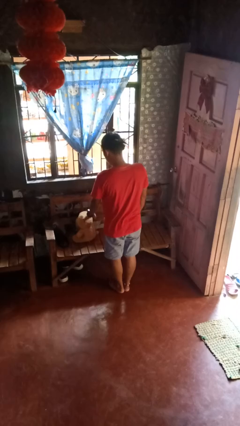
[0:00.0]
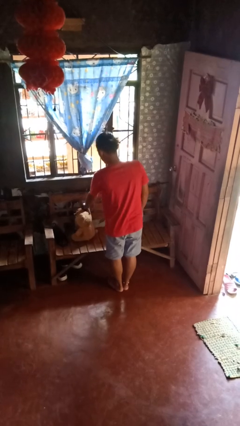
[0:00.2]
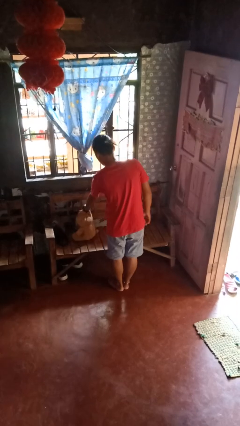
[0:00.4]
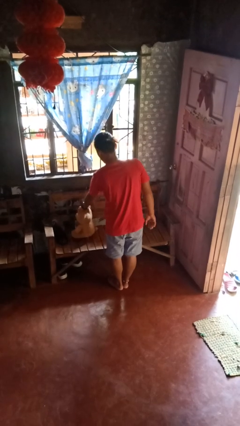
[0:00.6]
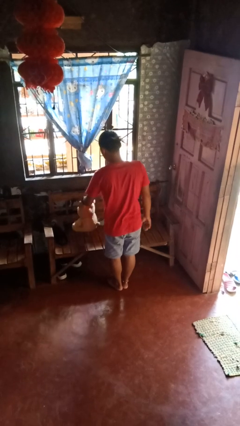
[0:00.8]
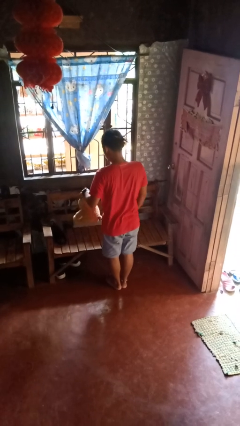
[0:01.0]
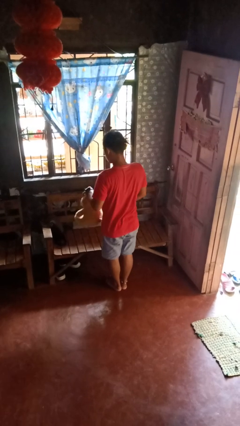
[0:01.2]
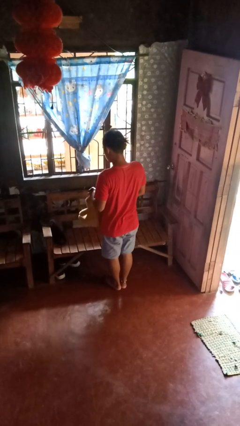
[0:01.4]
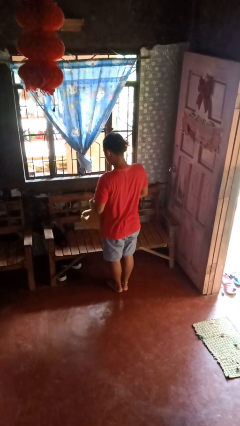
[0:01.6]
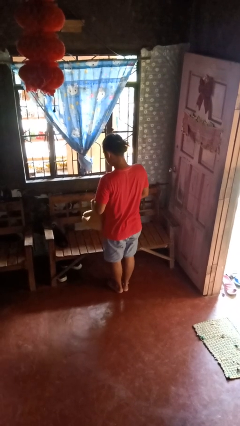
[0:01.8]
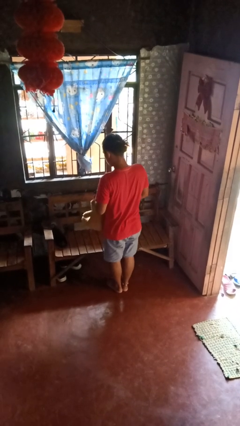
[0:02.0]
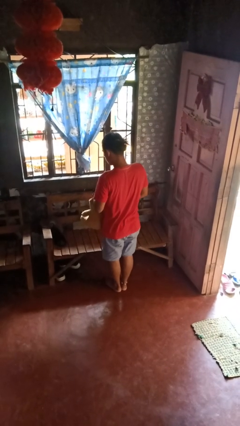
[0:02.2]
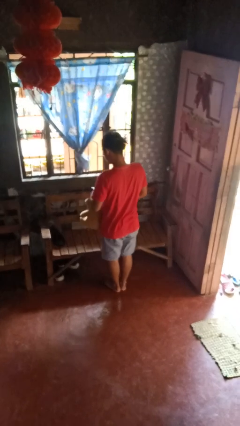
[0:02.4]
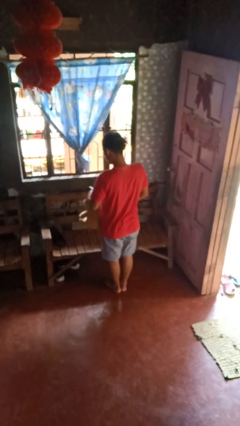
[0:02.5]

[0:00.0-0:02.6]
person picks up object from couch

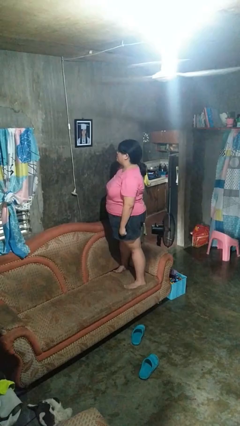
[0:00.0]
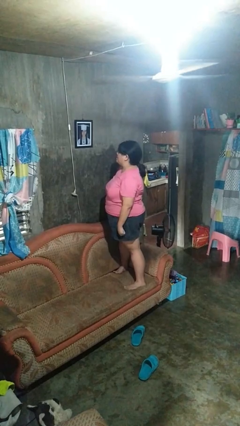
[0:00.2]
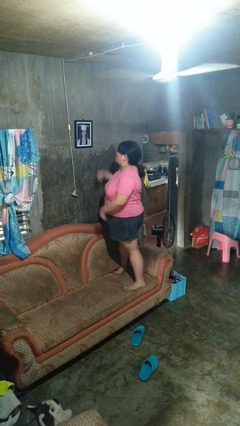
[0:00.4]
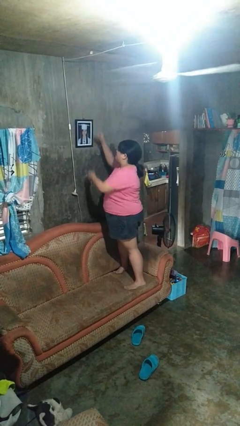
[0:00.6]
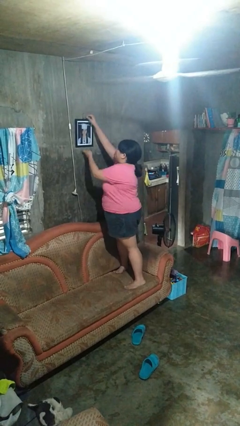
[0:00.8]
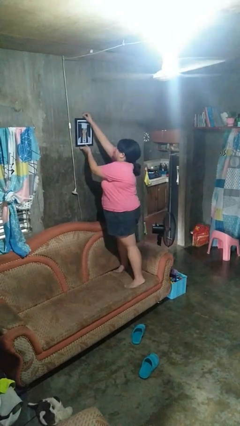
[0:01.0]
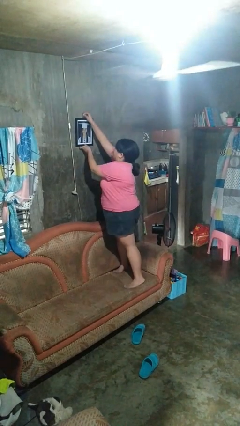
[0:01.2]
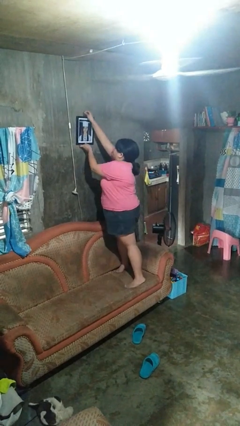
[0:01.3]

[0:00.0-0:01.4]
person takes down picture frame

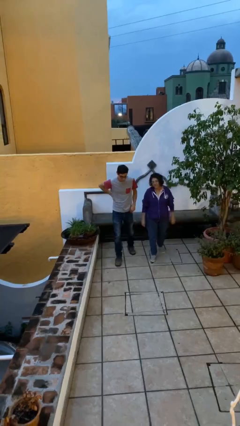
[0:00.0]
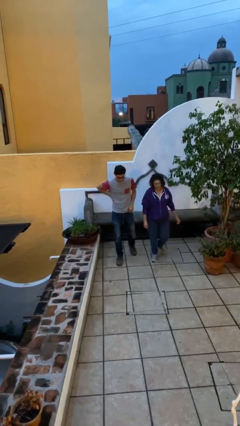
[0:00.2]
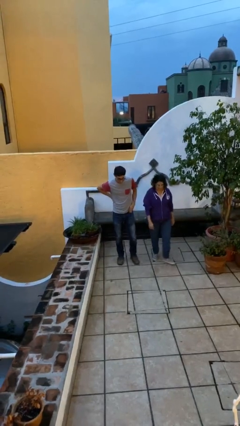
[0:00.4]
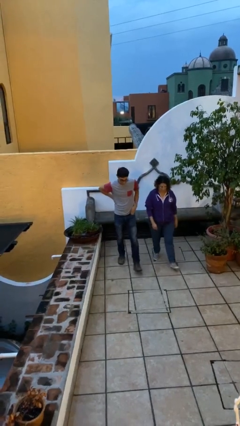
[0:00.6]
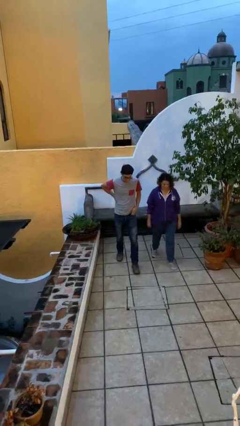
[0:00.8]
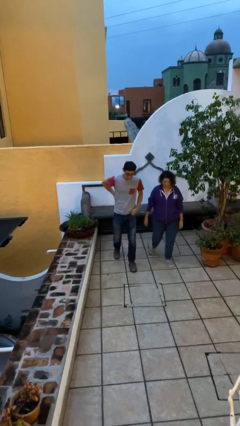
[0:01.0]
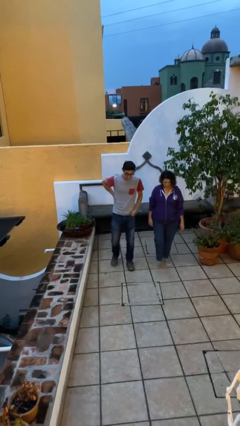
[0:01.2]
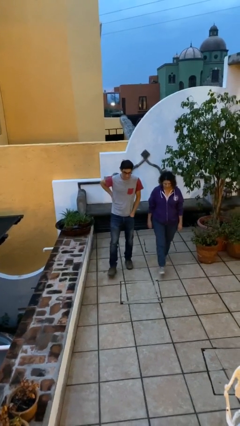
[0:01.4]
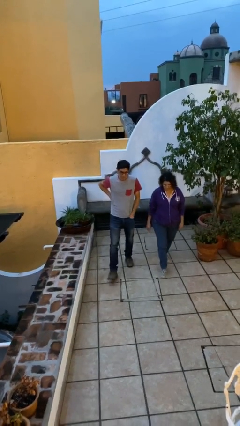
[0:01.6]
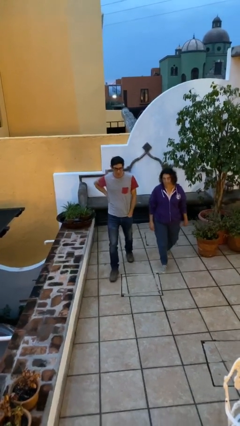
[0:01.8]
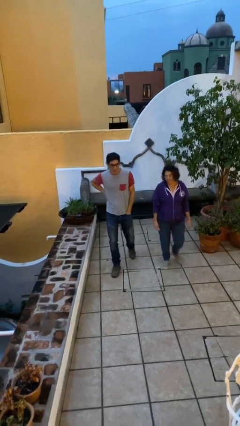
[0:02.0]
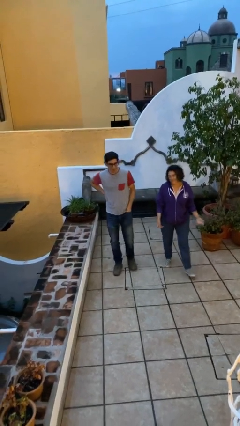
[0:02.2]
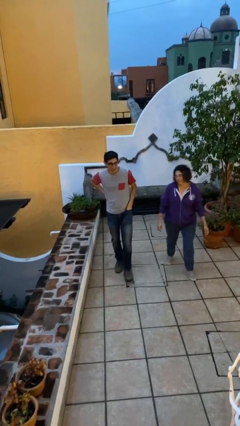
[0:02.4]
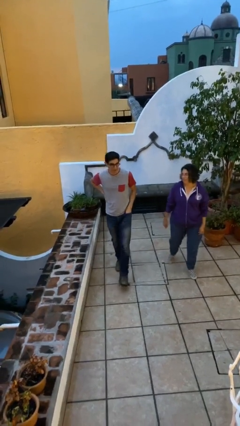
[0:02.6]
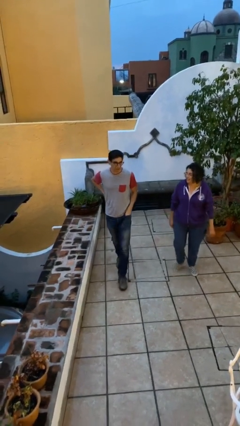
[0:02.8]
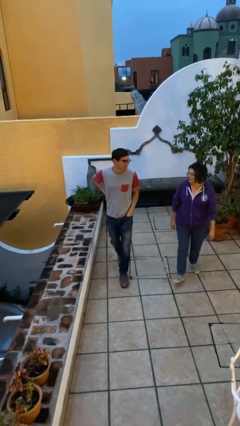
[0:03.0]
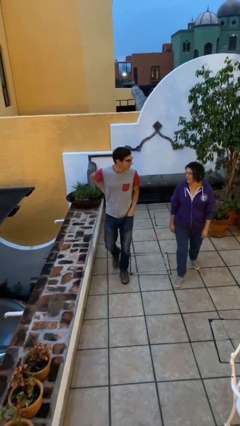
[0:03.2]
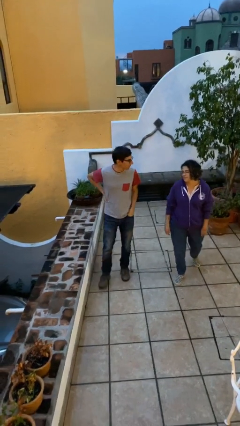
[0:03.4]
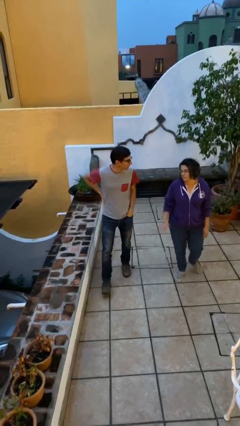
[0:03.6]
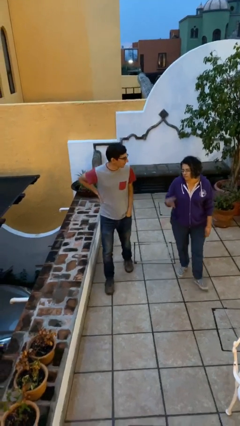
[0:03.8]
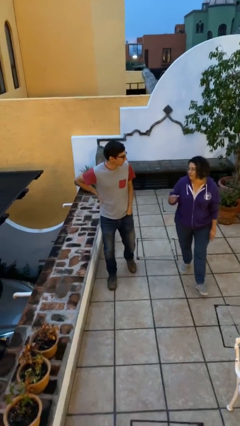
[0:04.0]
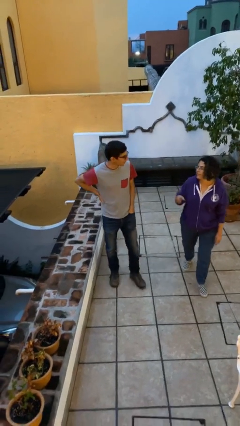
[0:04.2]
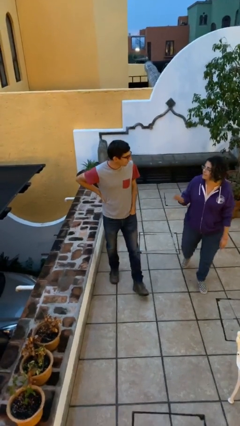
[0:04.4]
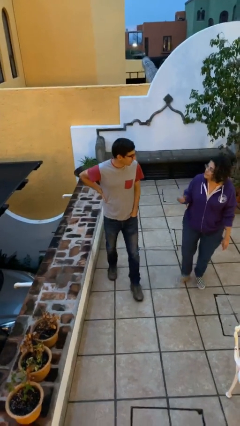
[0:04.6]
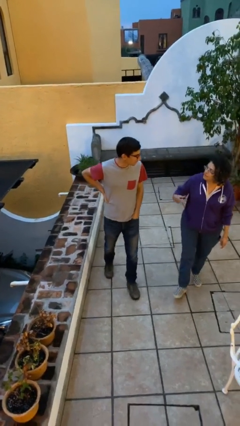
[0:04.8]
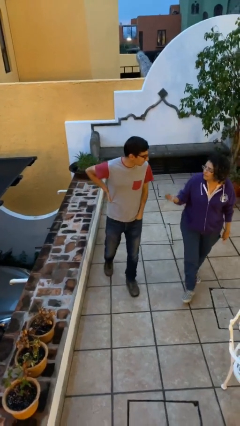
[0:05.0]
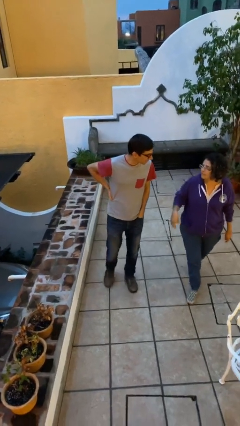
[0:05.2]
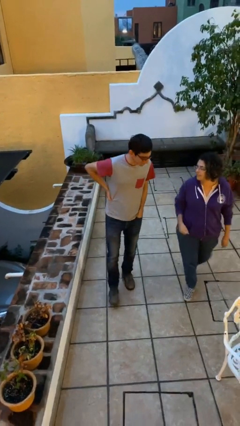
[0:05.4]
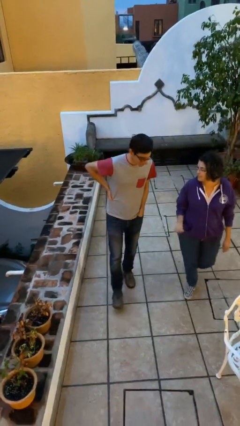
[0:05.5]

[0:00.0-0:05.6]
person talks to person

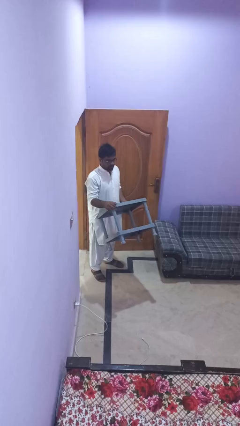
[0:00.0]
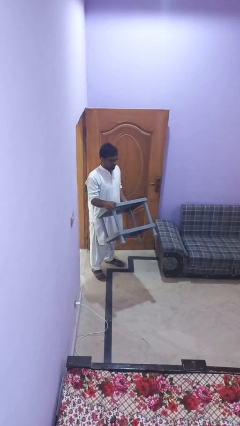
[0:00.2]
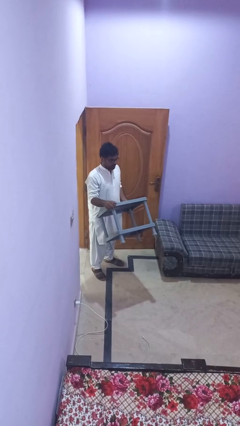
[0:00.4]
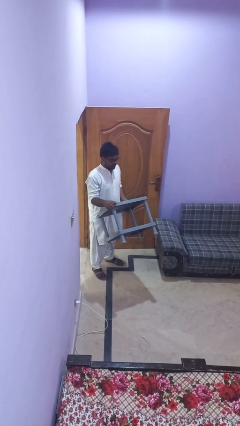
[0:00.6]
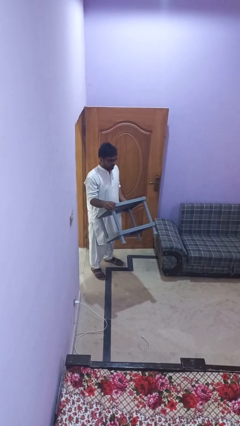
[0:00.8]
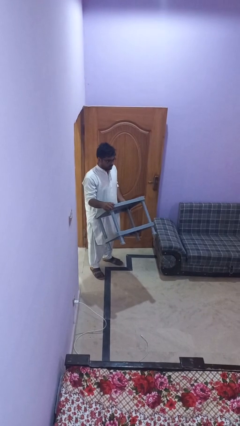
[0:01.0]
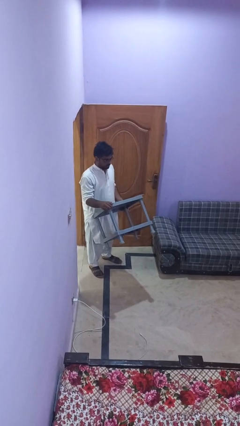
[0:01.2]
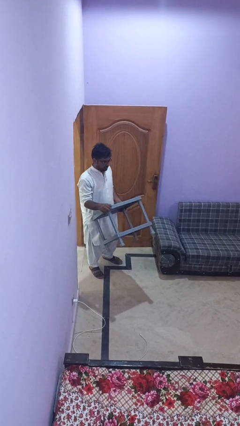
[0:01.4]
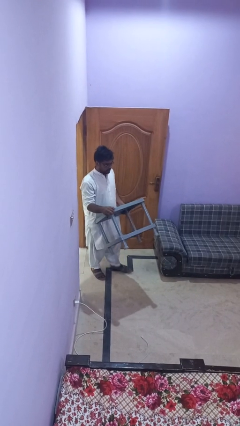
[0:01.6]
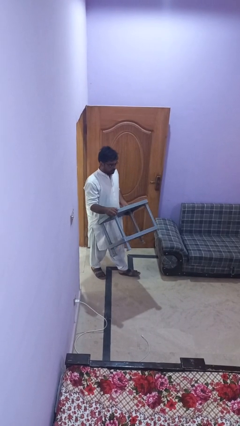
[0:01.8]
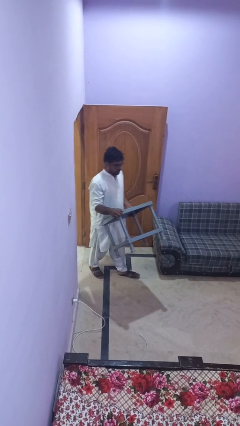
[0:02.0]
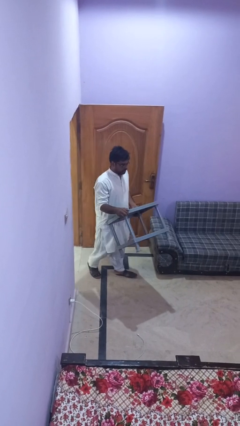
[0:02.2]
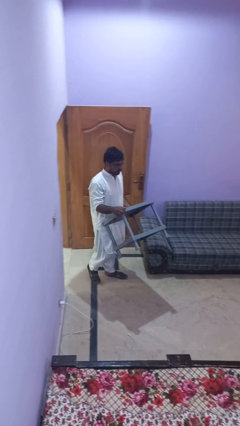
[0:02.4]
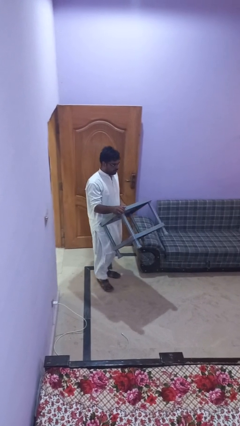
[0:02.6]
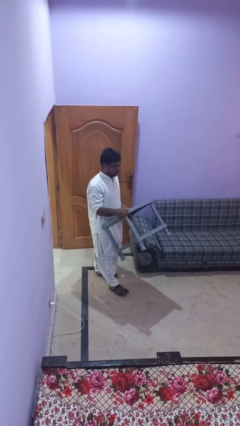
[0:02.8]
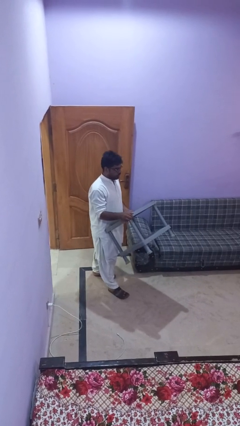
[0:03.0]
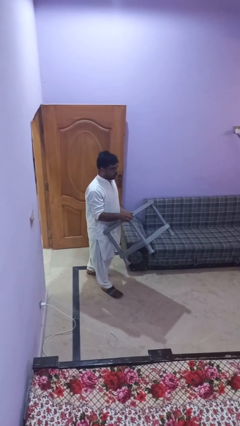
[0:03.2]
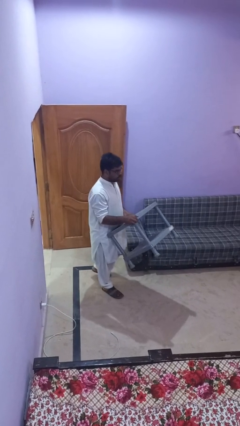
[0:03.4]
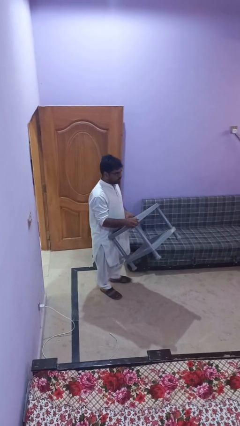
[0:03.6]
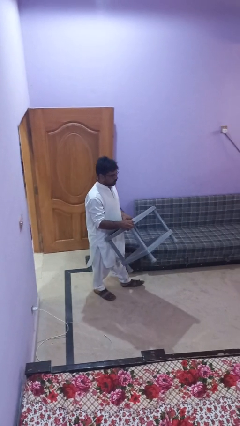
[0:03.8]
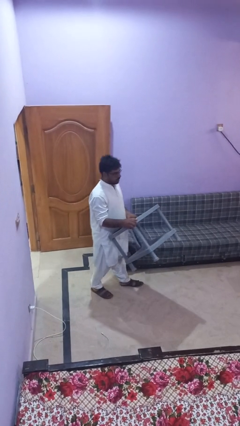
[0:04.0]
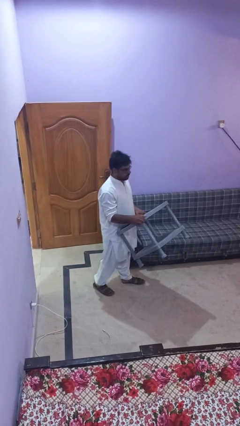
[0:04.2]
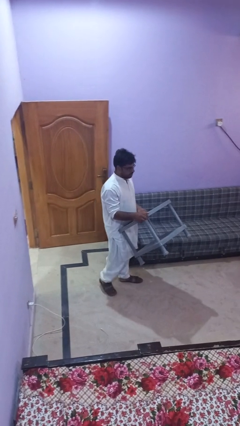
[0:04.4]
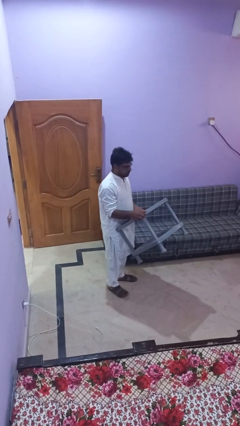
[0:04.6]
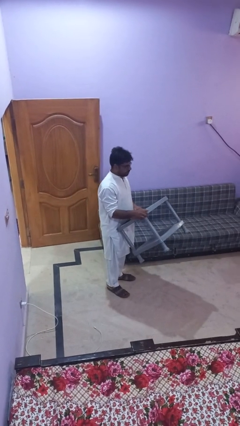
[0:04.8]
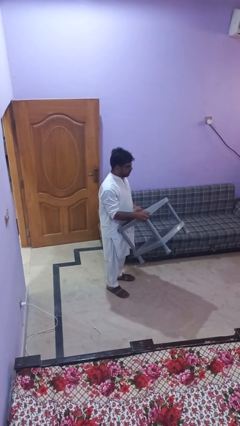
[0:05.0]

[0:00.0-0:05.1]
person carries furniture

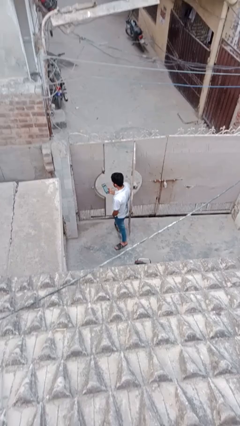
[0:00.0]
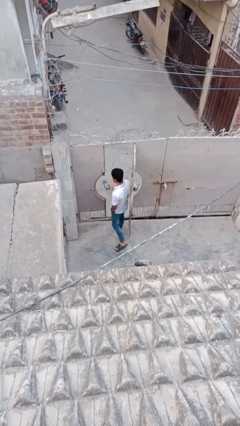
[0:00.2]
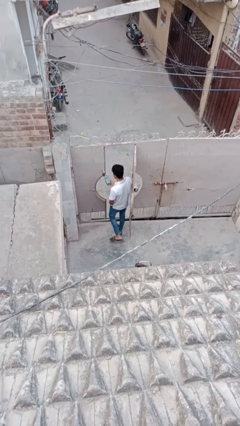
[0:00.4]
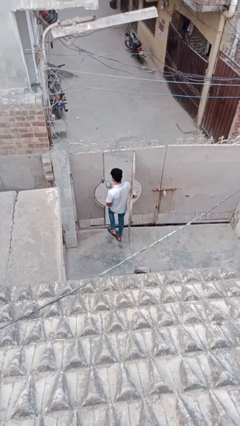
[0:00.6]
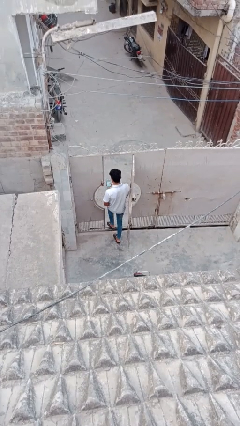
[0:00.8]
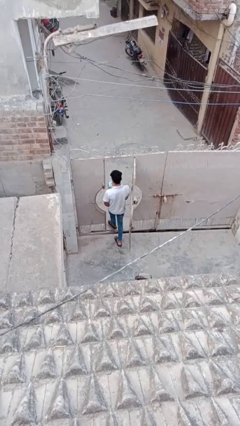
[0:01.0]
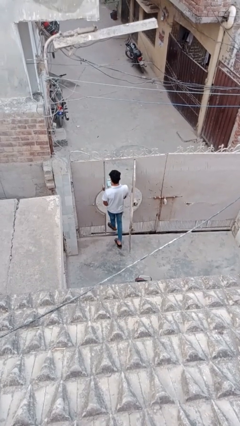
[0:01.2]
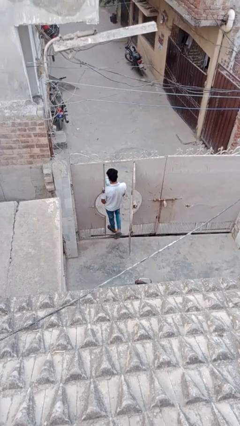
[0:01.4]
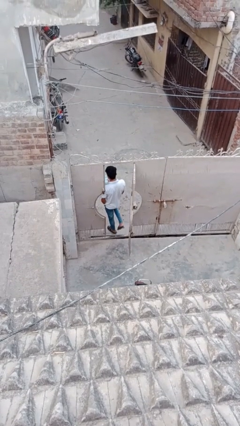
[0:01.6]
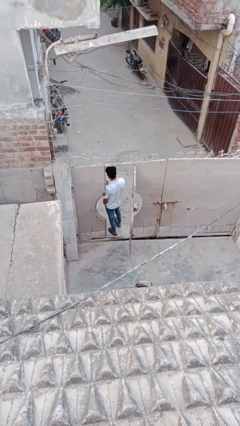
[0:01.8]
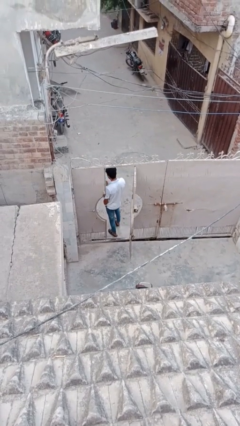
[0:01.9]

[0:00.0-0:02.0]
person exits scene through structure

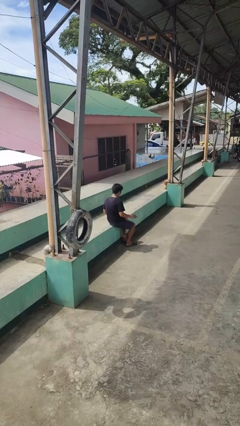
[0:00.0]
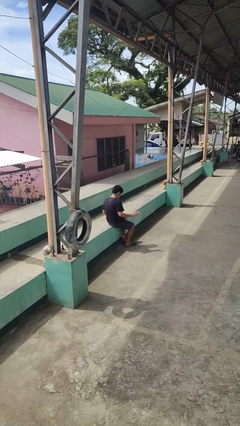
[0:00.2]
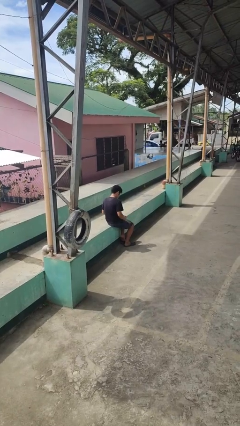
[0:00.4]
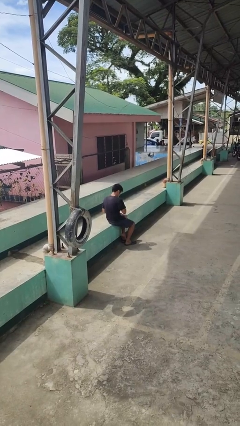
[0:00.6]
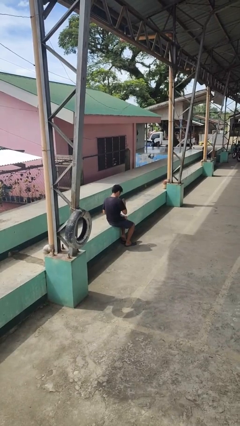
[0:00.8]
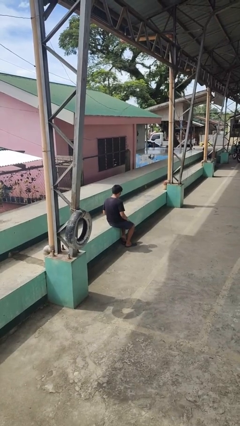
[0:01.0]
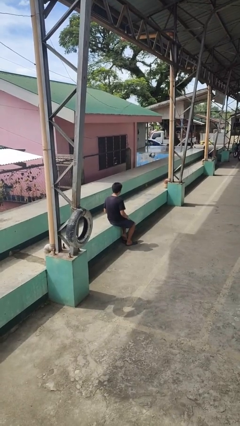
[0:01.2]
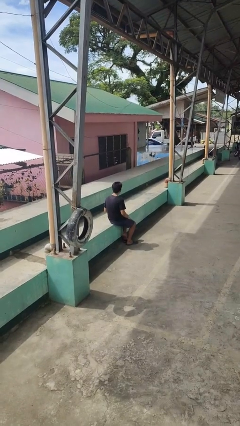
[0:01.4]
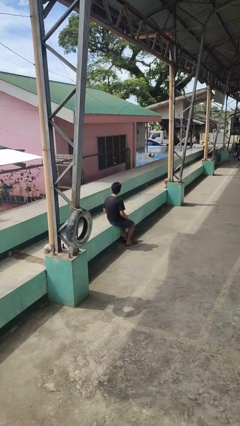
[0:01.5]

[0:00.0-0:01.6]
person slaps hands on thighs
